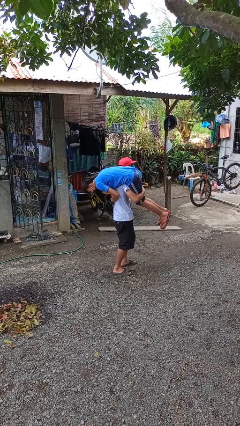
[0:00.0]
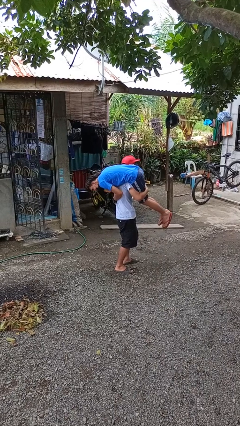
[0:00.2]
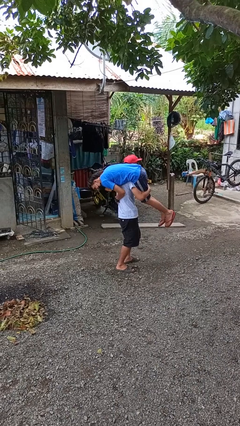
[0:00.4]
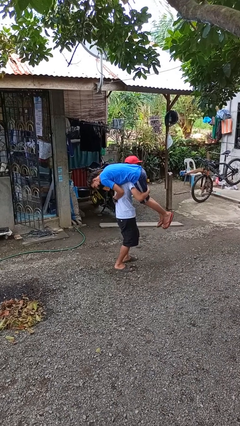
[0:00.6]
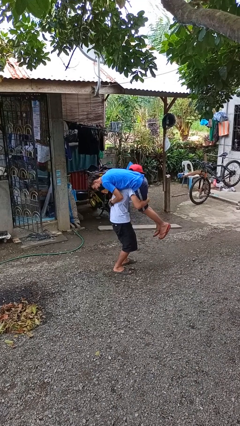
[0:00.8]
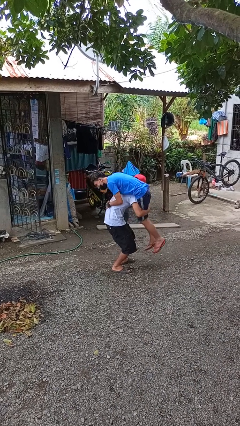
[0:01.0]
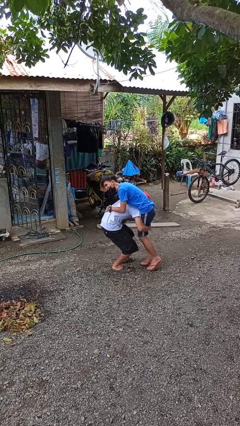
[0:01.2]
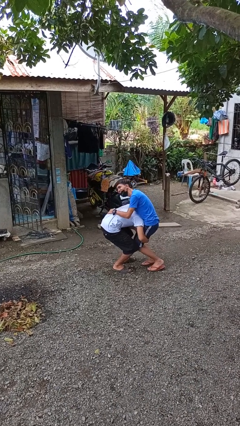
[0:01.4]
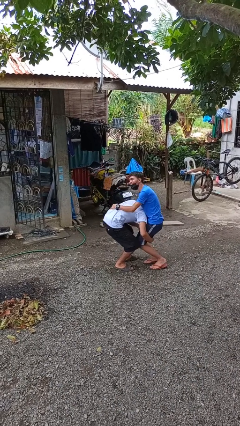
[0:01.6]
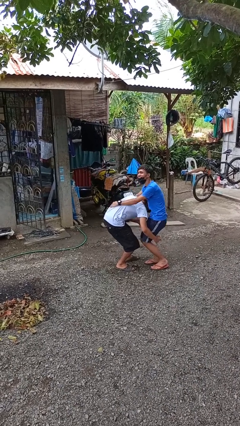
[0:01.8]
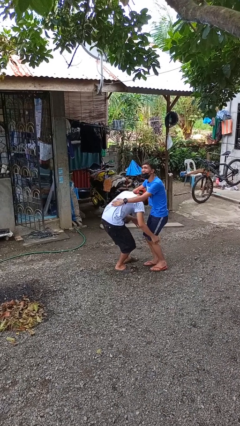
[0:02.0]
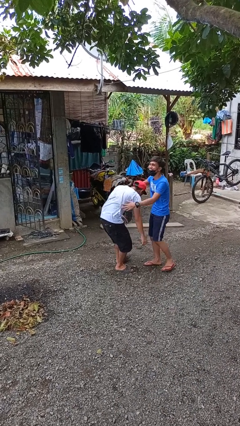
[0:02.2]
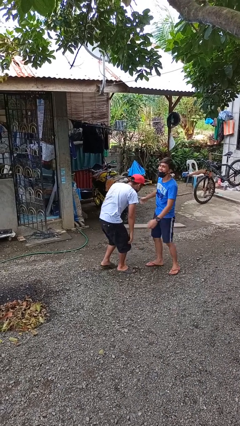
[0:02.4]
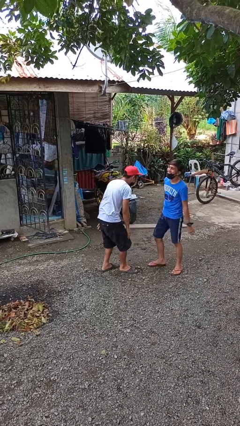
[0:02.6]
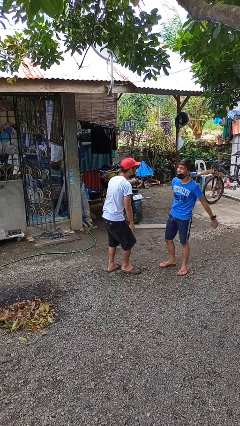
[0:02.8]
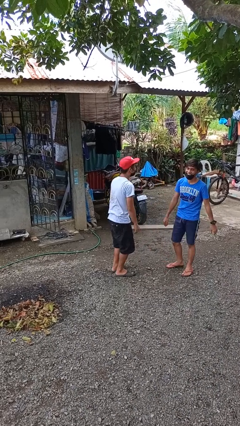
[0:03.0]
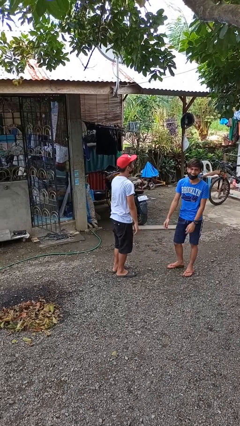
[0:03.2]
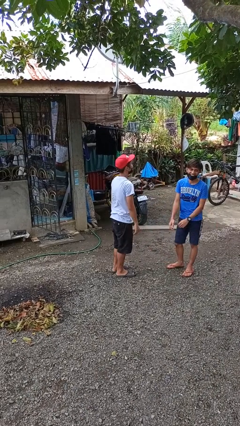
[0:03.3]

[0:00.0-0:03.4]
person puts down person

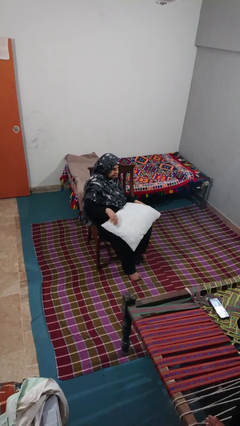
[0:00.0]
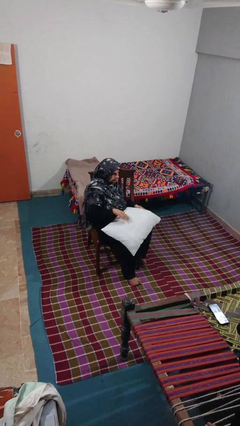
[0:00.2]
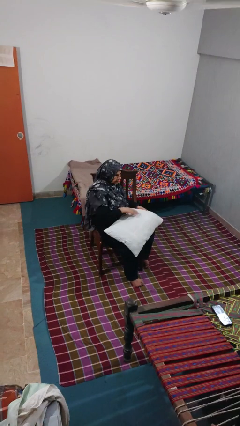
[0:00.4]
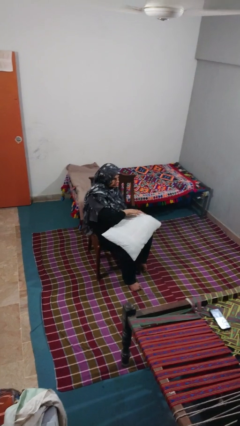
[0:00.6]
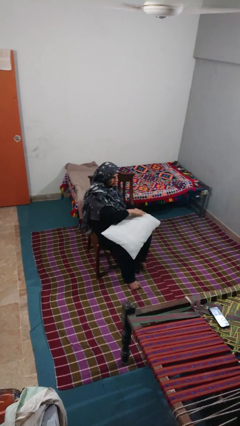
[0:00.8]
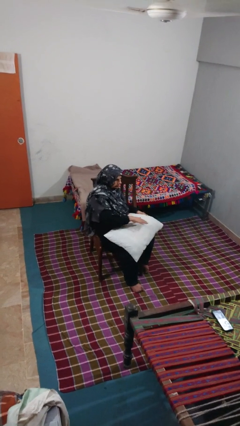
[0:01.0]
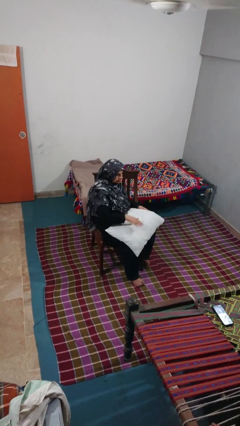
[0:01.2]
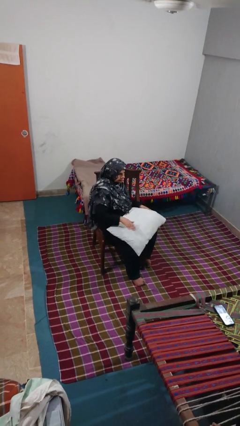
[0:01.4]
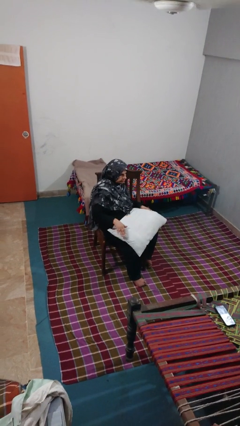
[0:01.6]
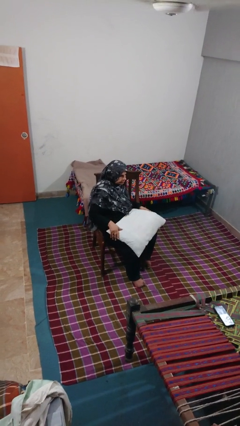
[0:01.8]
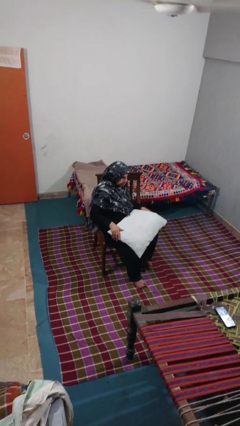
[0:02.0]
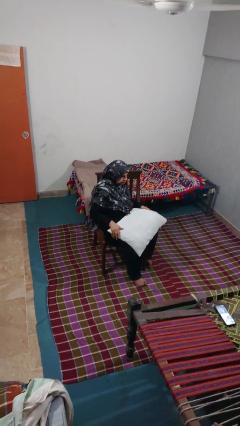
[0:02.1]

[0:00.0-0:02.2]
person waves hand over object

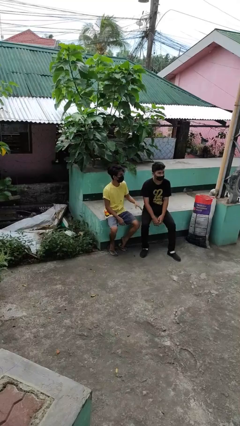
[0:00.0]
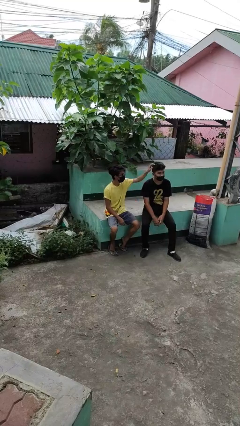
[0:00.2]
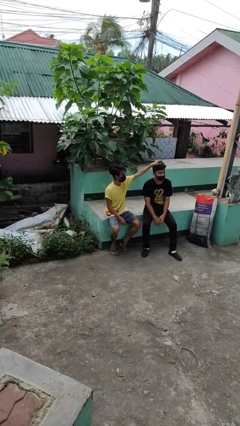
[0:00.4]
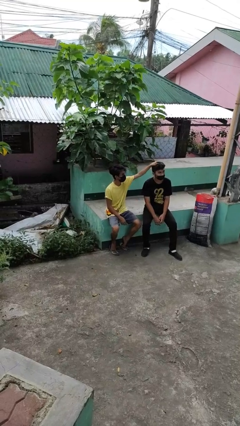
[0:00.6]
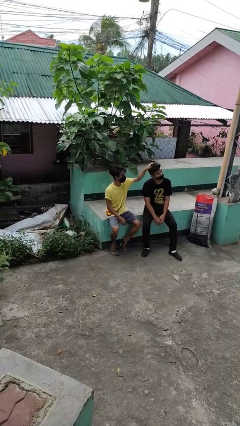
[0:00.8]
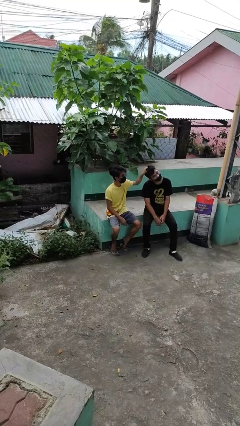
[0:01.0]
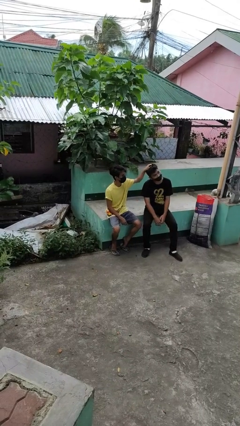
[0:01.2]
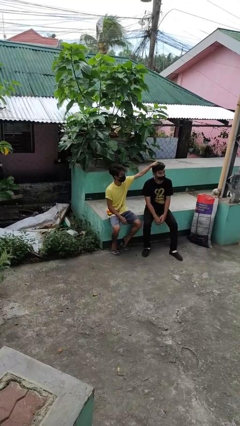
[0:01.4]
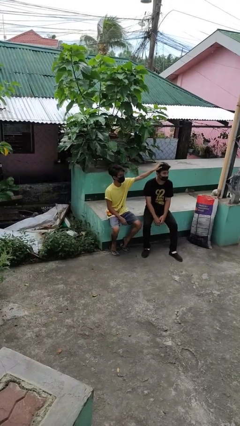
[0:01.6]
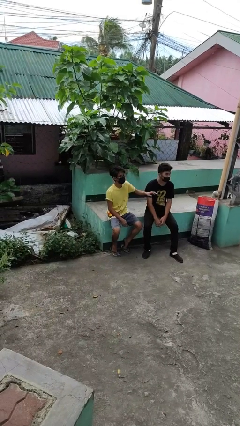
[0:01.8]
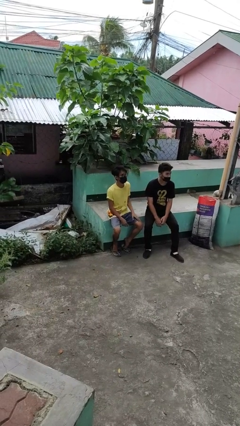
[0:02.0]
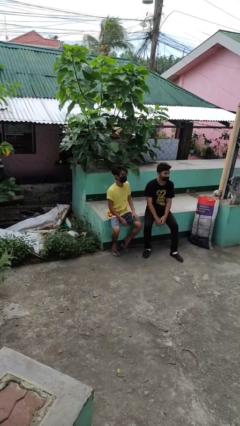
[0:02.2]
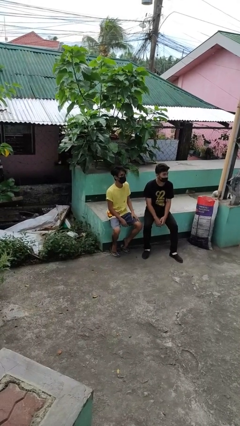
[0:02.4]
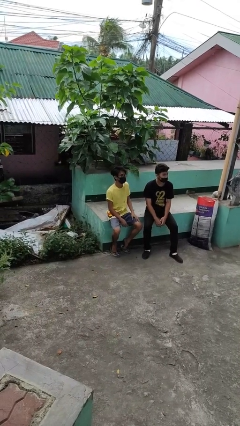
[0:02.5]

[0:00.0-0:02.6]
person grabs person by hair

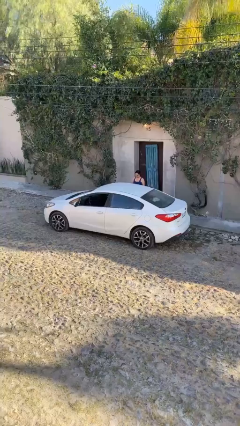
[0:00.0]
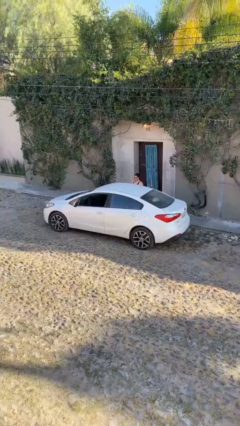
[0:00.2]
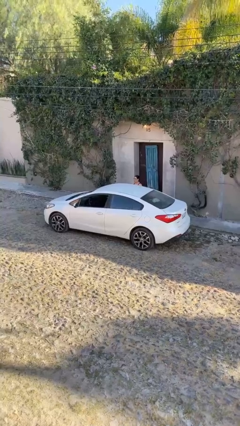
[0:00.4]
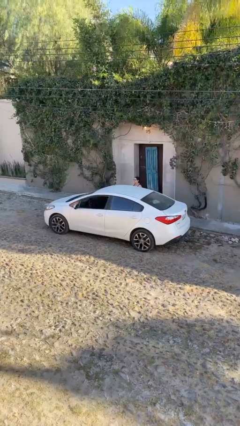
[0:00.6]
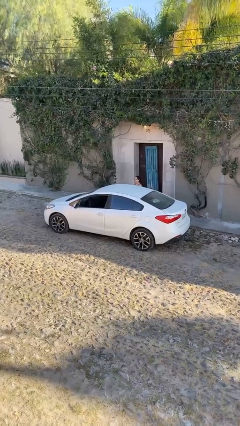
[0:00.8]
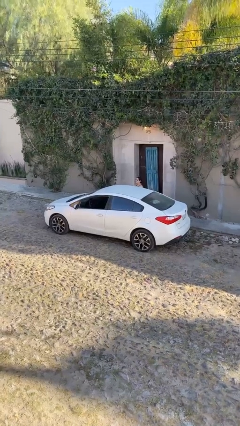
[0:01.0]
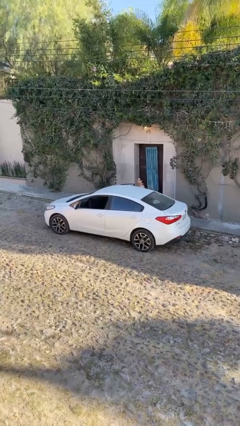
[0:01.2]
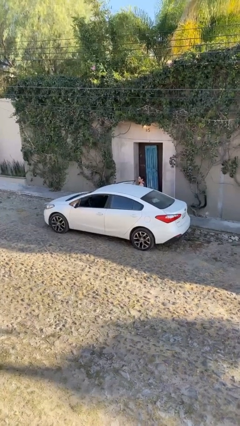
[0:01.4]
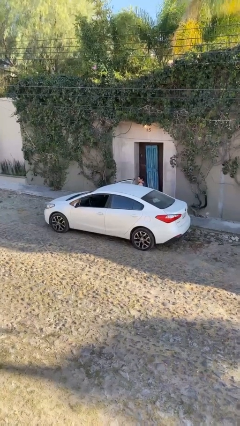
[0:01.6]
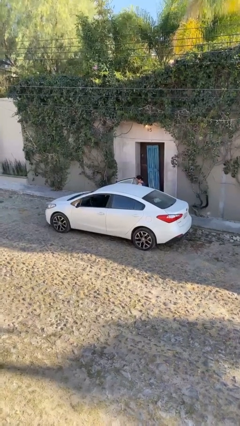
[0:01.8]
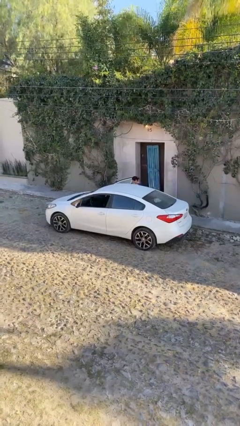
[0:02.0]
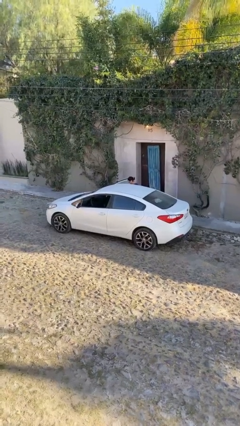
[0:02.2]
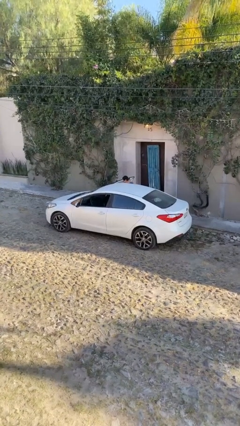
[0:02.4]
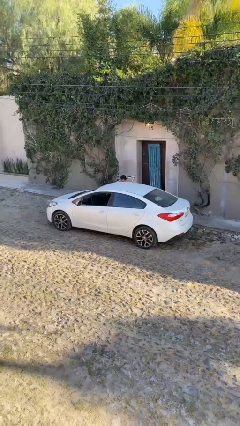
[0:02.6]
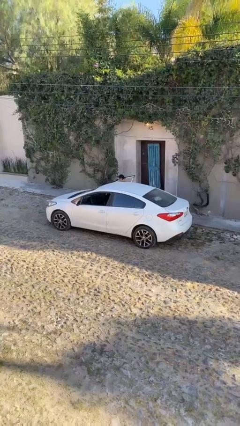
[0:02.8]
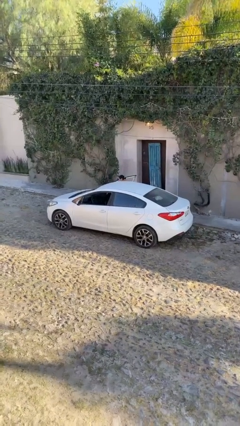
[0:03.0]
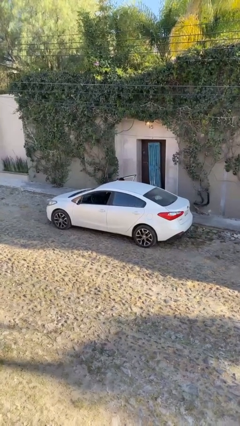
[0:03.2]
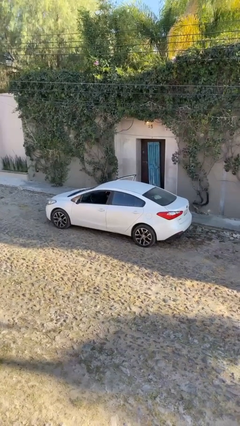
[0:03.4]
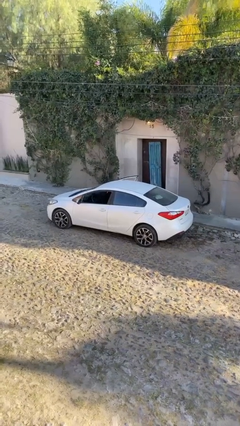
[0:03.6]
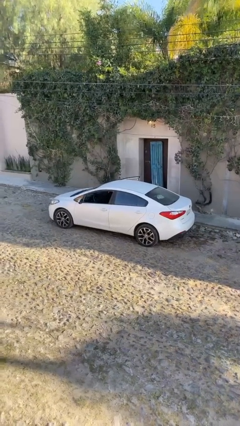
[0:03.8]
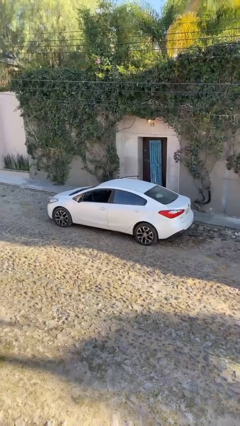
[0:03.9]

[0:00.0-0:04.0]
car picks up person

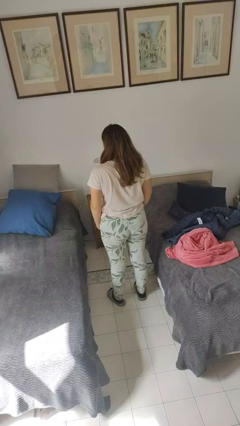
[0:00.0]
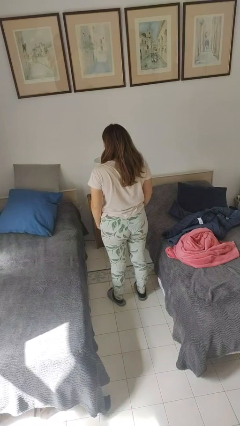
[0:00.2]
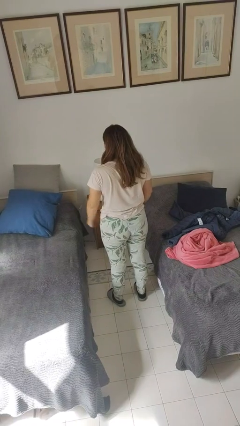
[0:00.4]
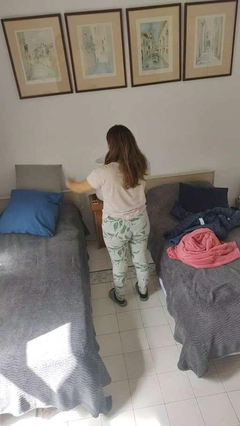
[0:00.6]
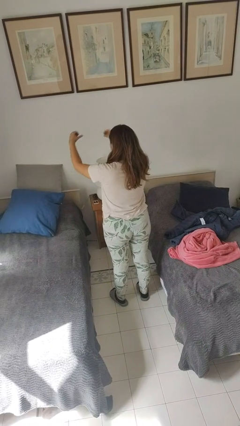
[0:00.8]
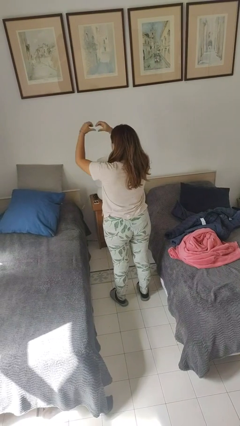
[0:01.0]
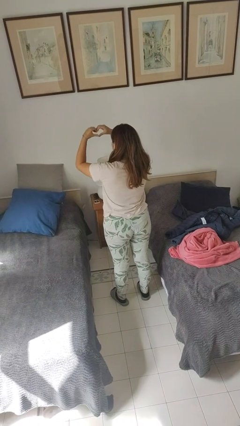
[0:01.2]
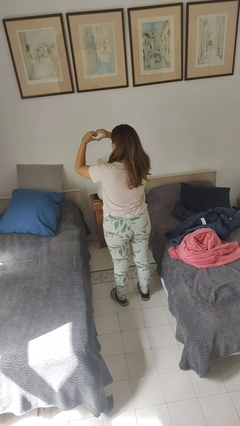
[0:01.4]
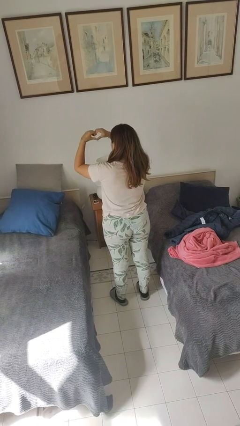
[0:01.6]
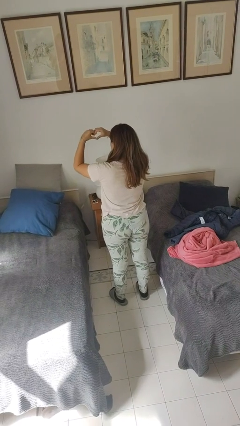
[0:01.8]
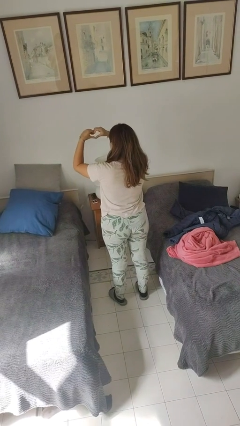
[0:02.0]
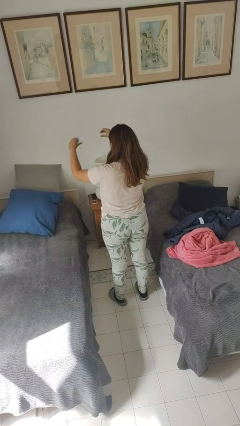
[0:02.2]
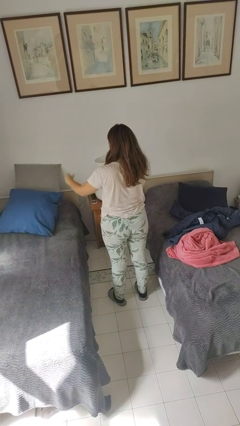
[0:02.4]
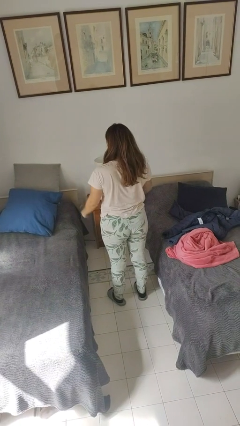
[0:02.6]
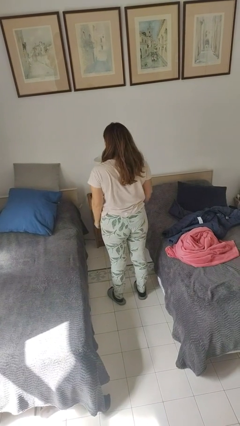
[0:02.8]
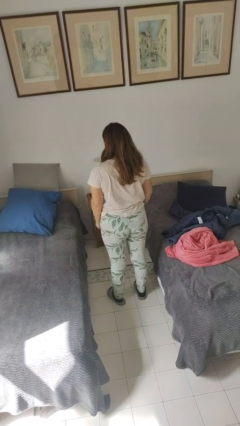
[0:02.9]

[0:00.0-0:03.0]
person gestures heart

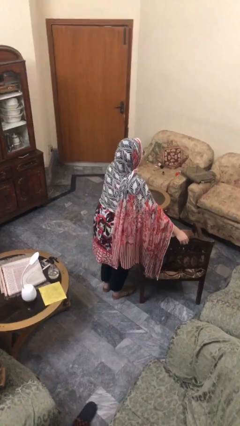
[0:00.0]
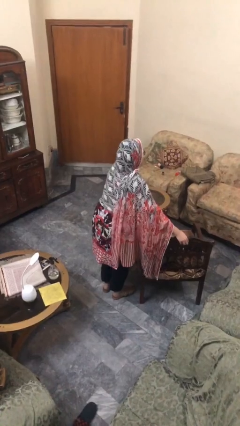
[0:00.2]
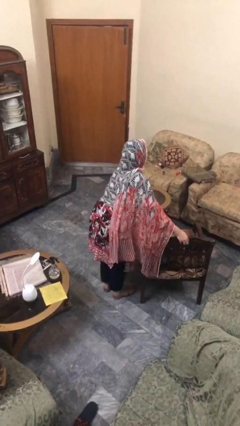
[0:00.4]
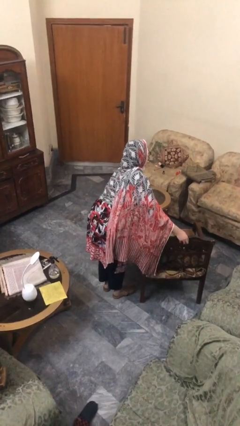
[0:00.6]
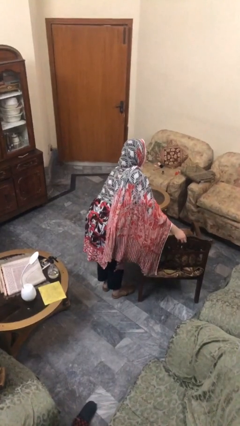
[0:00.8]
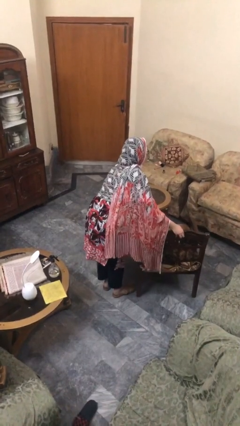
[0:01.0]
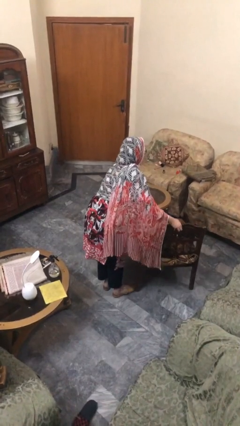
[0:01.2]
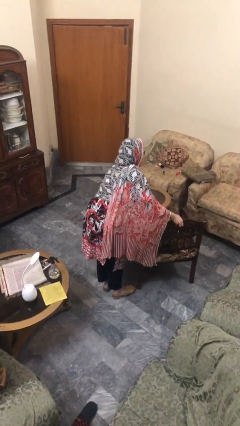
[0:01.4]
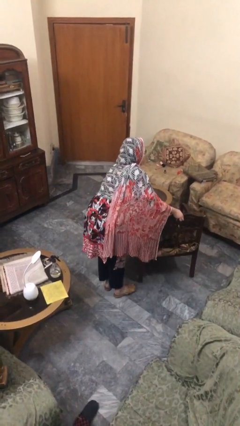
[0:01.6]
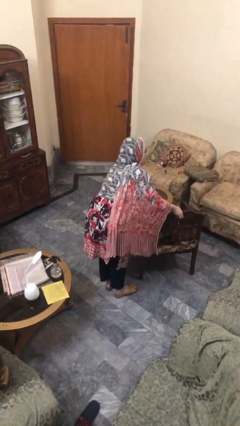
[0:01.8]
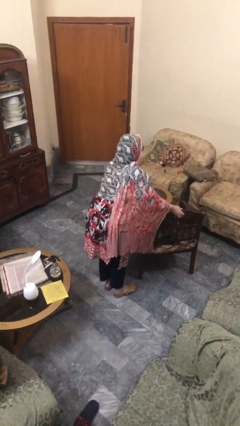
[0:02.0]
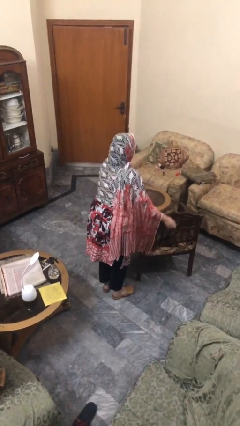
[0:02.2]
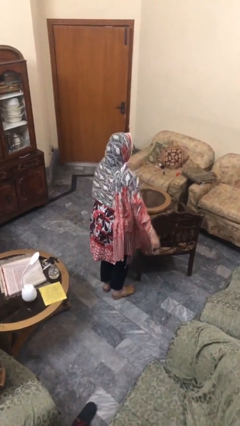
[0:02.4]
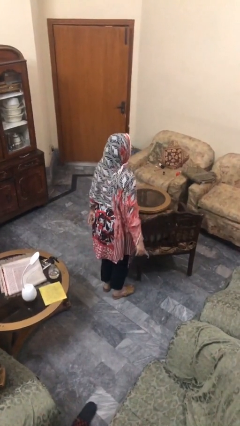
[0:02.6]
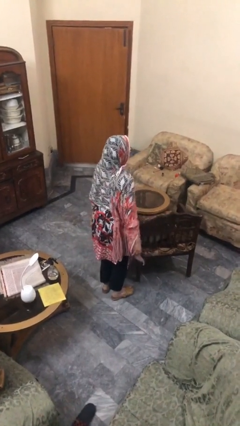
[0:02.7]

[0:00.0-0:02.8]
person pushes in chair
